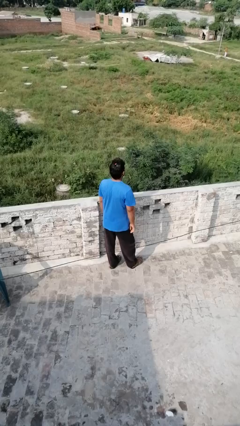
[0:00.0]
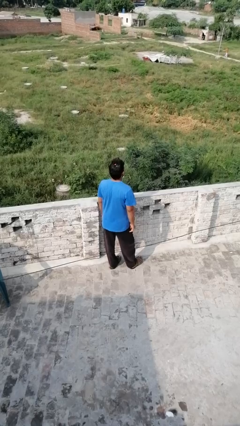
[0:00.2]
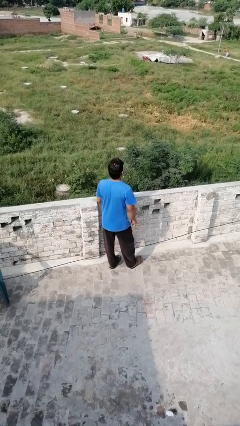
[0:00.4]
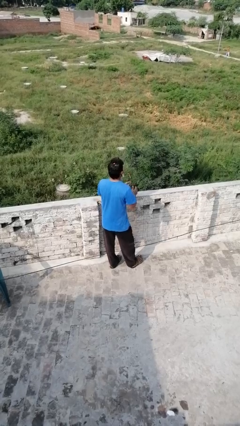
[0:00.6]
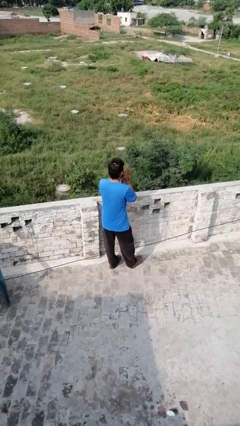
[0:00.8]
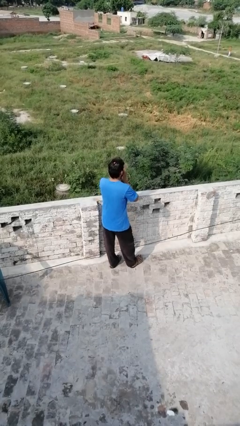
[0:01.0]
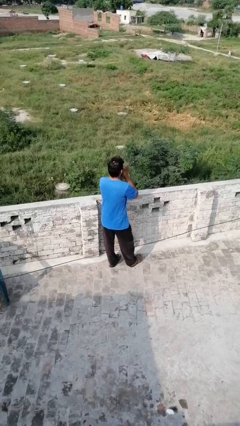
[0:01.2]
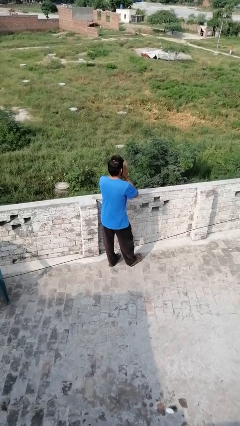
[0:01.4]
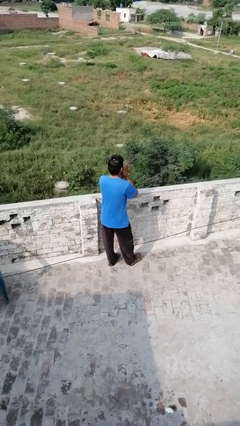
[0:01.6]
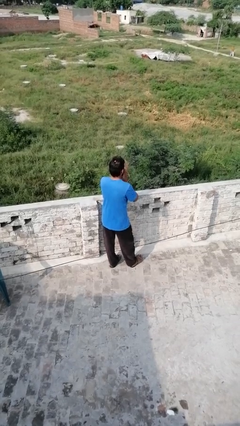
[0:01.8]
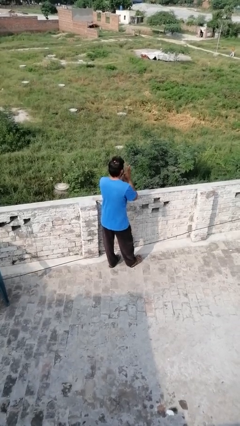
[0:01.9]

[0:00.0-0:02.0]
person blows into hands

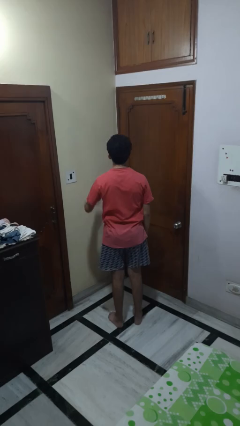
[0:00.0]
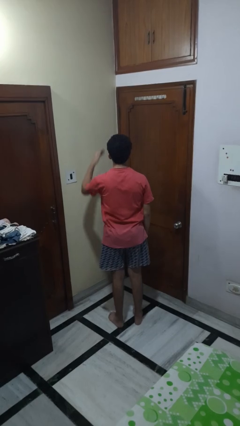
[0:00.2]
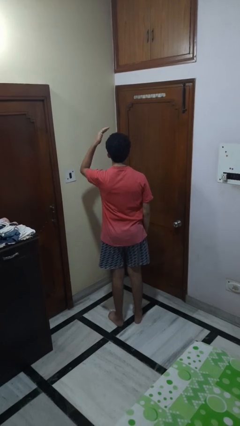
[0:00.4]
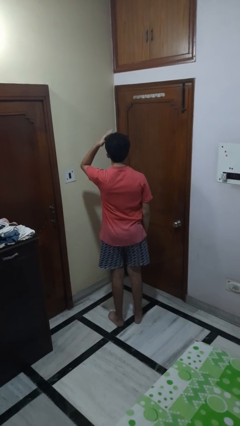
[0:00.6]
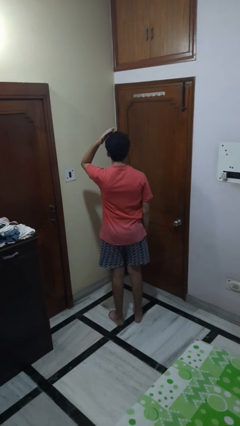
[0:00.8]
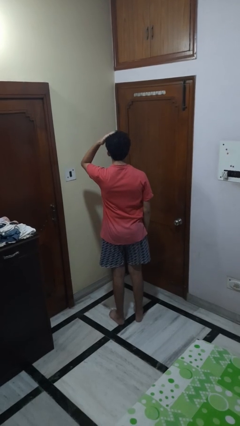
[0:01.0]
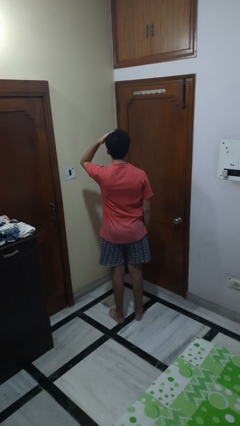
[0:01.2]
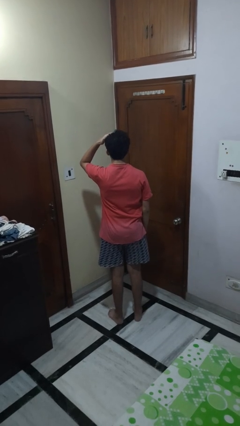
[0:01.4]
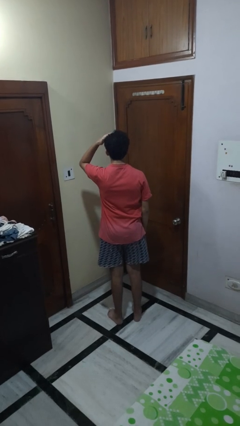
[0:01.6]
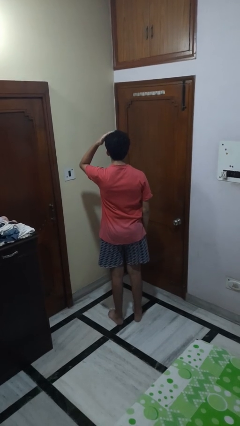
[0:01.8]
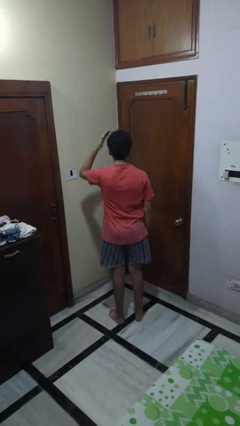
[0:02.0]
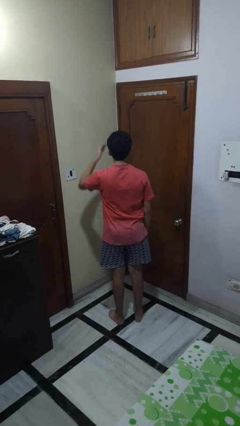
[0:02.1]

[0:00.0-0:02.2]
person pats head

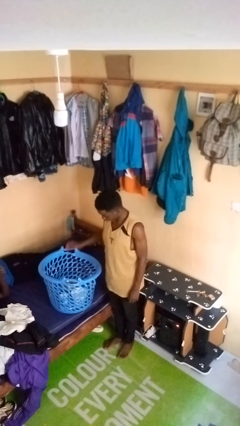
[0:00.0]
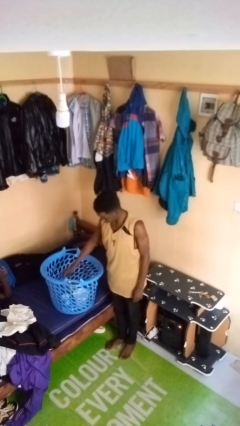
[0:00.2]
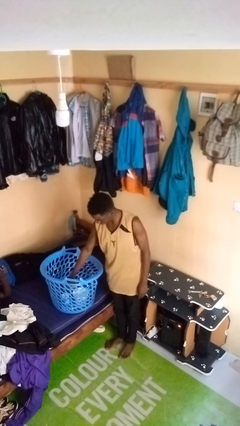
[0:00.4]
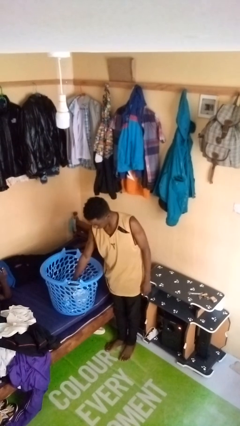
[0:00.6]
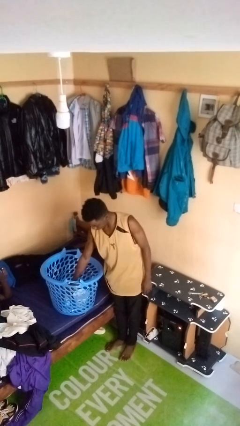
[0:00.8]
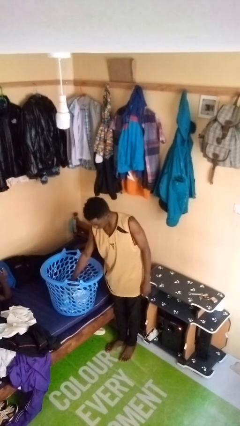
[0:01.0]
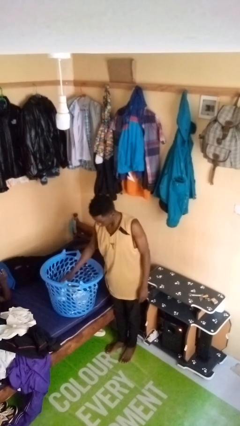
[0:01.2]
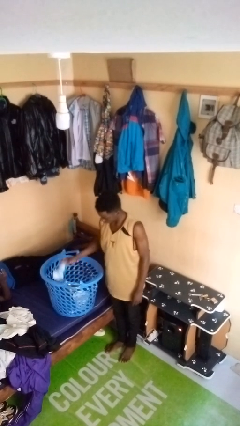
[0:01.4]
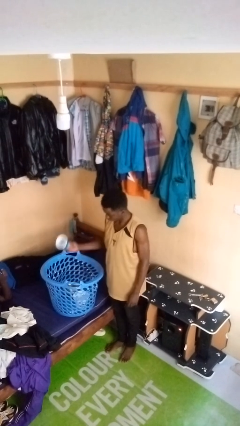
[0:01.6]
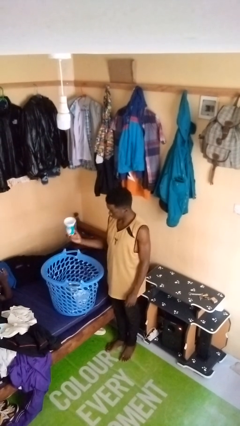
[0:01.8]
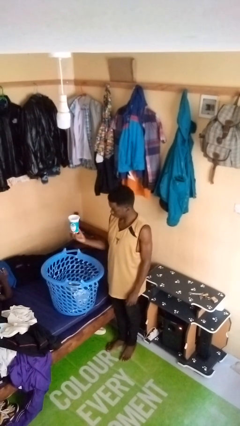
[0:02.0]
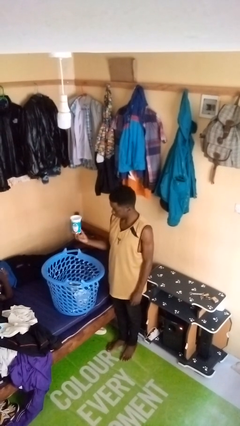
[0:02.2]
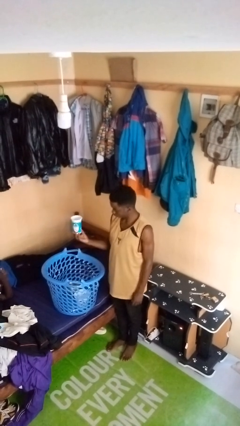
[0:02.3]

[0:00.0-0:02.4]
person takes object from basket

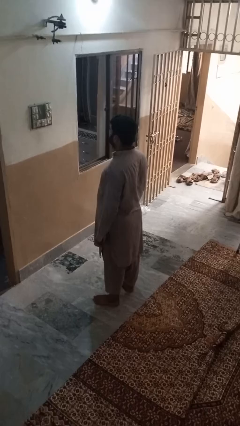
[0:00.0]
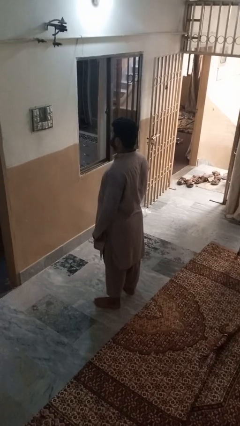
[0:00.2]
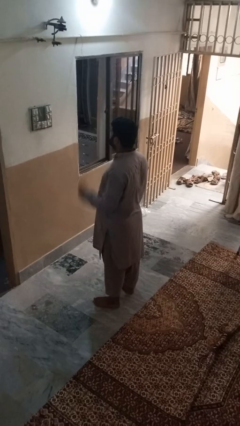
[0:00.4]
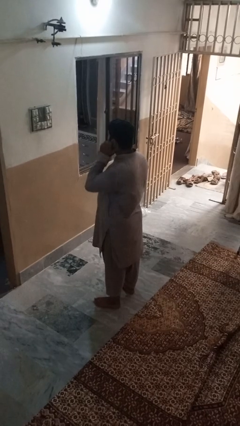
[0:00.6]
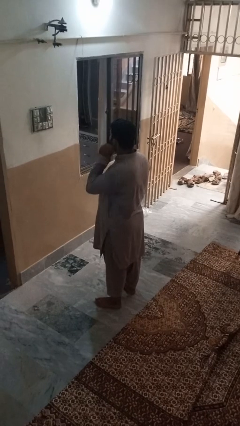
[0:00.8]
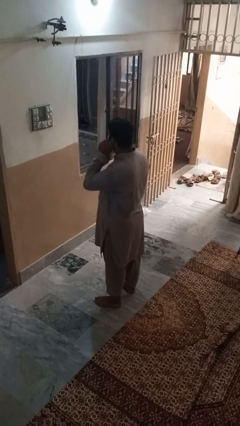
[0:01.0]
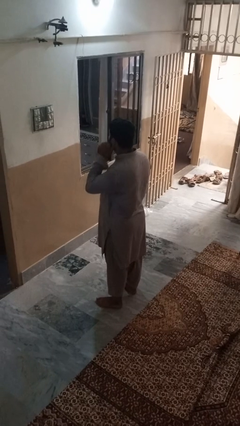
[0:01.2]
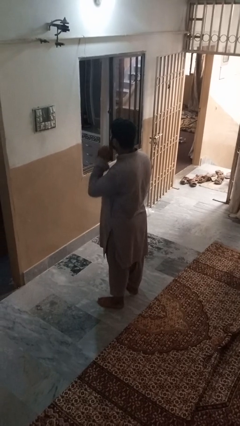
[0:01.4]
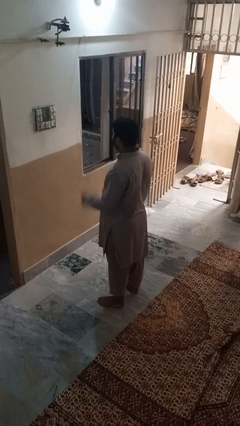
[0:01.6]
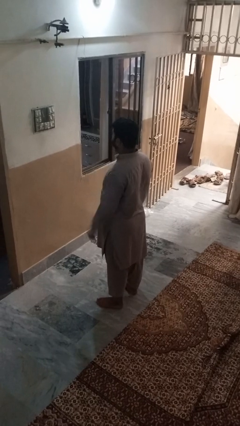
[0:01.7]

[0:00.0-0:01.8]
person touches earlobe

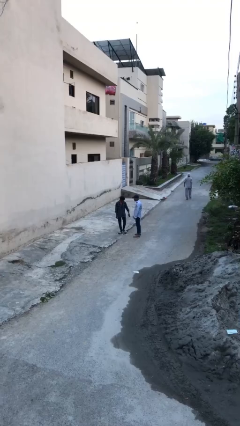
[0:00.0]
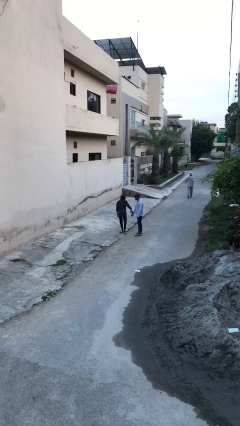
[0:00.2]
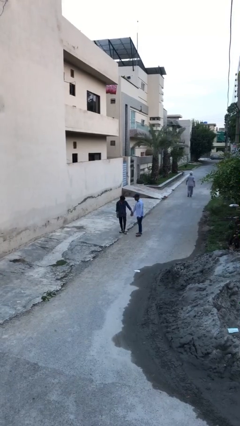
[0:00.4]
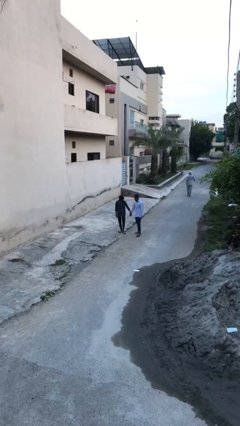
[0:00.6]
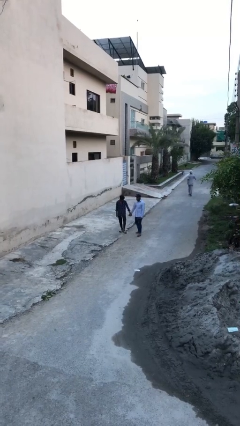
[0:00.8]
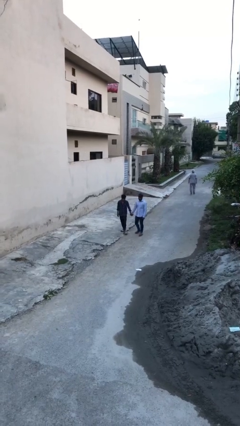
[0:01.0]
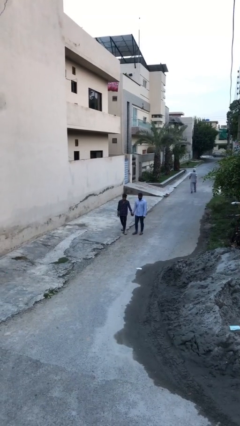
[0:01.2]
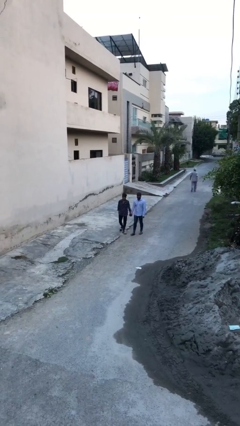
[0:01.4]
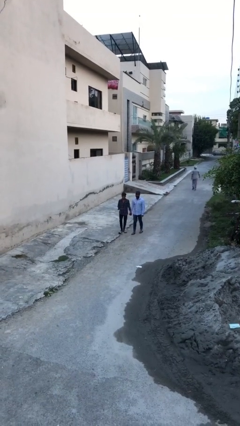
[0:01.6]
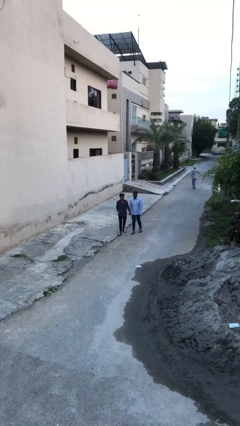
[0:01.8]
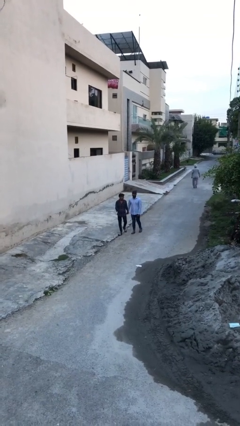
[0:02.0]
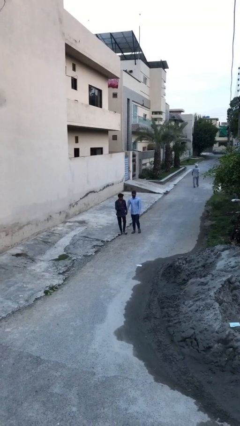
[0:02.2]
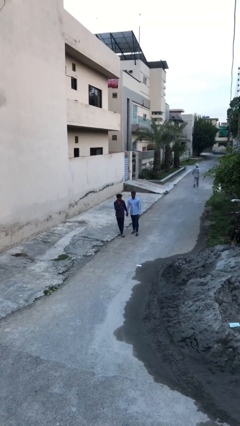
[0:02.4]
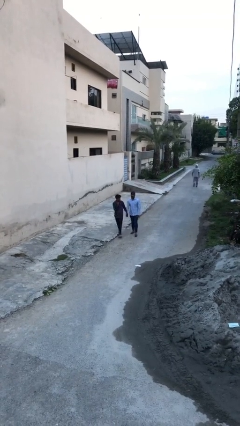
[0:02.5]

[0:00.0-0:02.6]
person holds hand

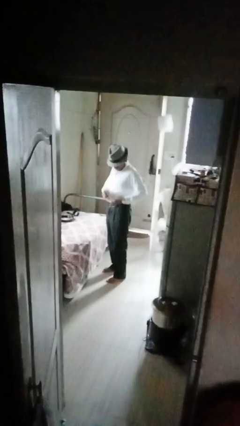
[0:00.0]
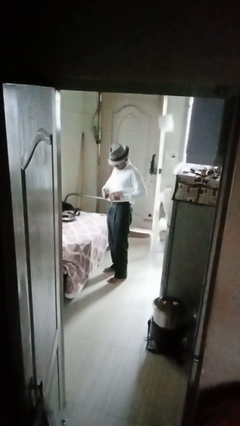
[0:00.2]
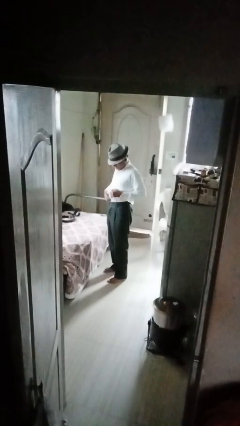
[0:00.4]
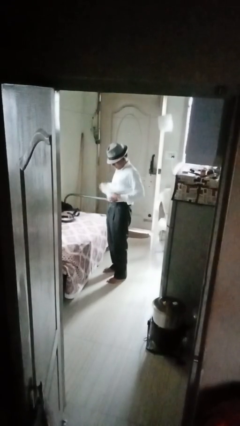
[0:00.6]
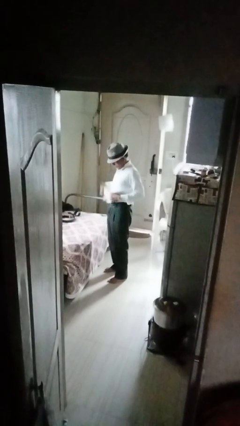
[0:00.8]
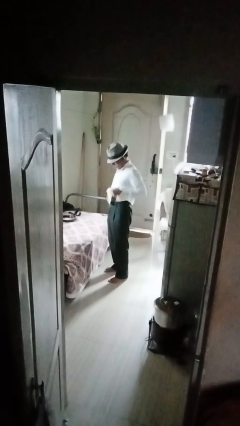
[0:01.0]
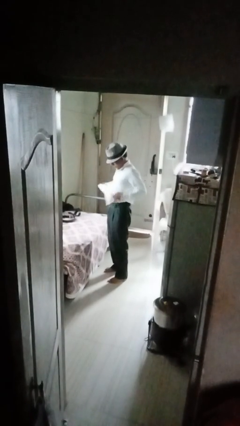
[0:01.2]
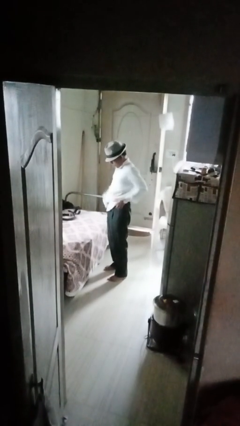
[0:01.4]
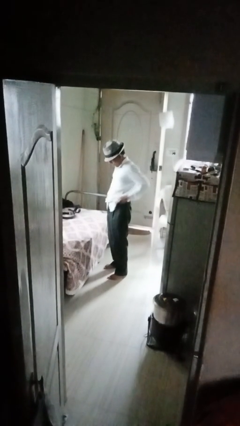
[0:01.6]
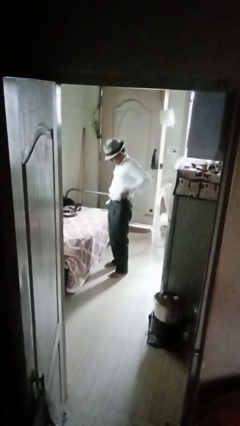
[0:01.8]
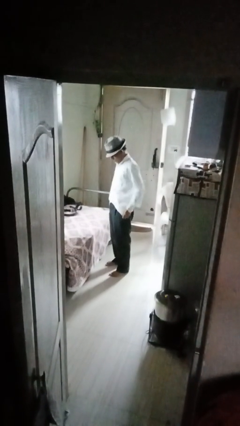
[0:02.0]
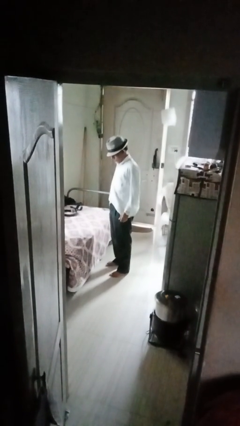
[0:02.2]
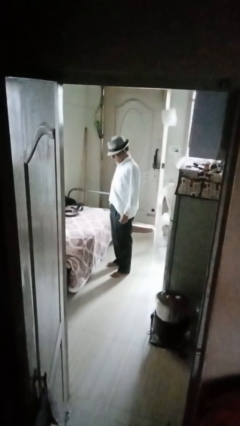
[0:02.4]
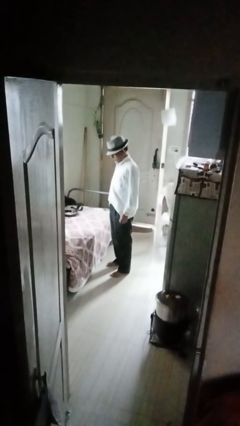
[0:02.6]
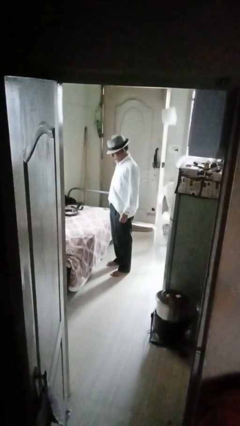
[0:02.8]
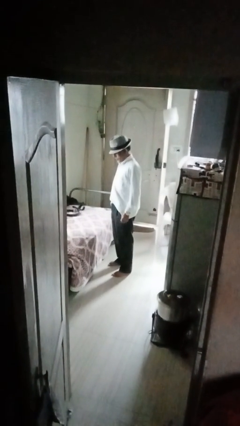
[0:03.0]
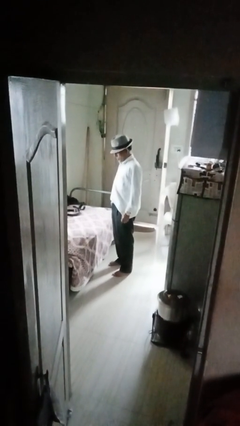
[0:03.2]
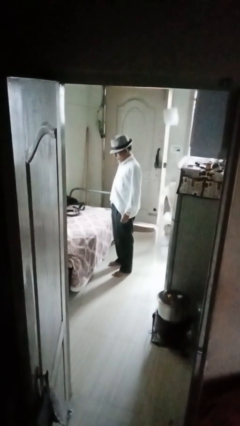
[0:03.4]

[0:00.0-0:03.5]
person untucks shirt

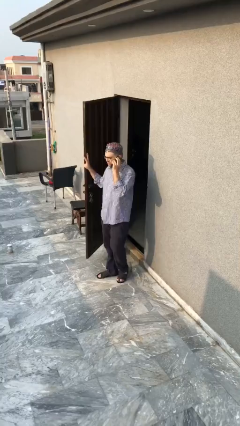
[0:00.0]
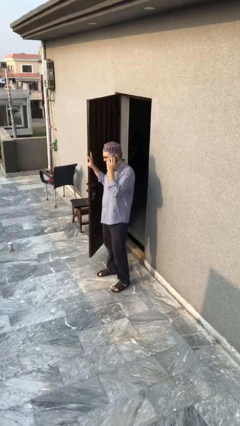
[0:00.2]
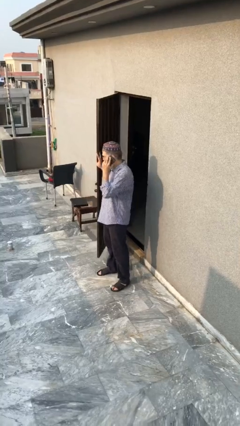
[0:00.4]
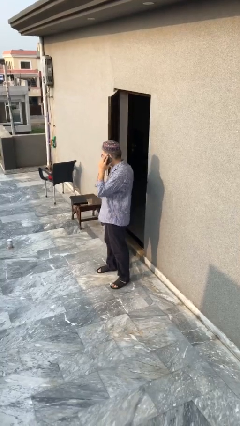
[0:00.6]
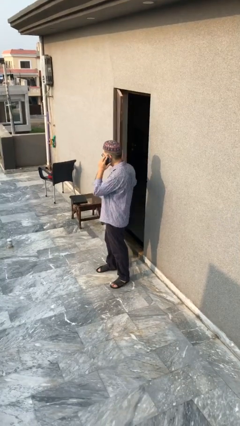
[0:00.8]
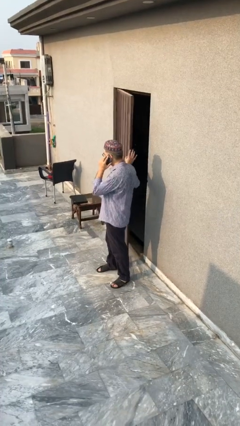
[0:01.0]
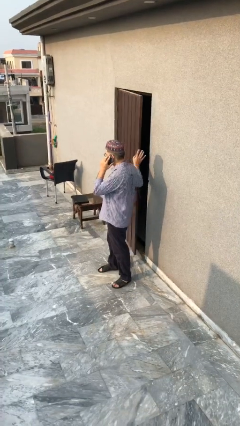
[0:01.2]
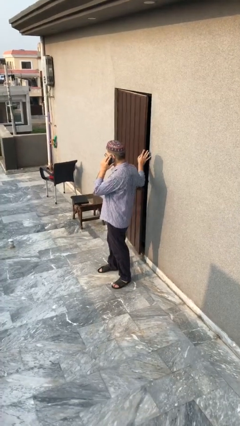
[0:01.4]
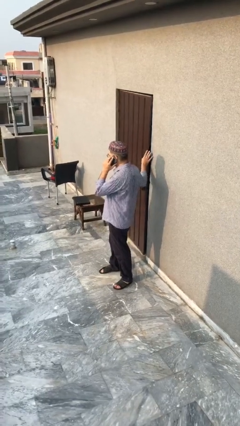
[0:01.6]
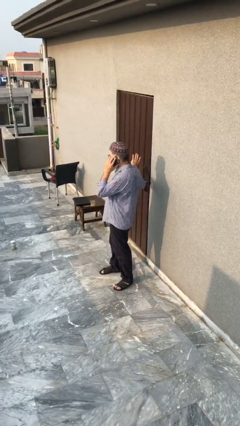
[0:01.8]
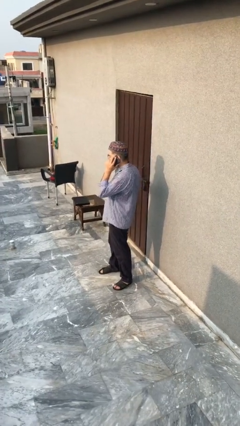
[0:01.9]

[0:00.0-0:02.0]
person closes facility door

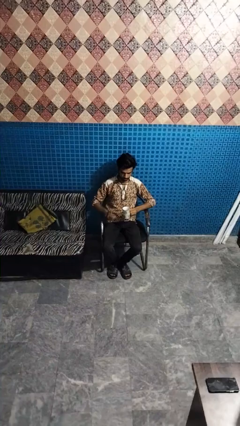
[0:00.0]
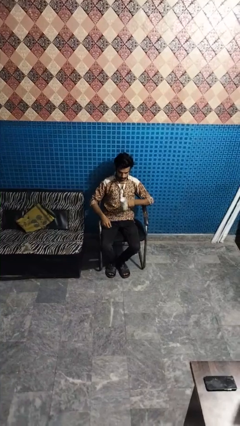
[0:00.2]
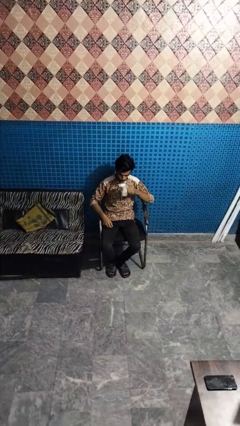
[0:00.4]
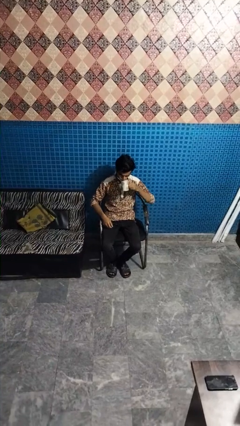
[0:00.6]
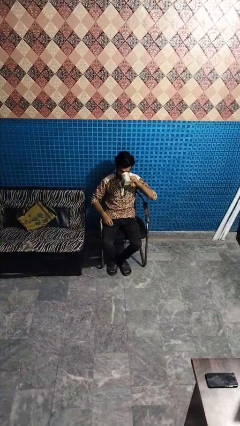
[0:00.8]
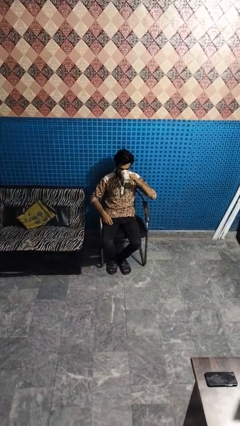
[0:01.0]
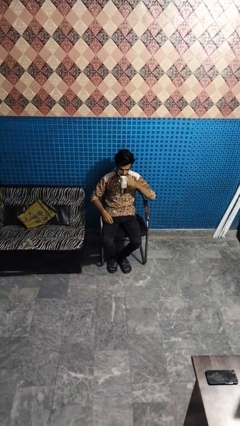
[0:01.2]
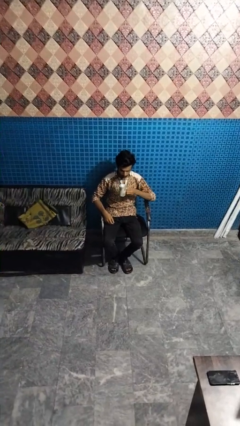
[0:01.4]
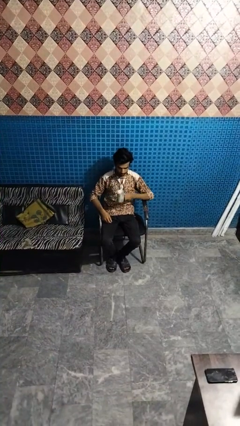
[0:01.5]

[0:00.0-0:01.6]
person drinks from mug